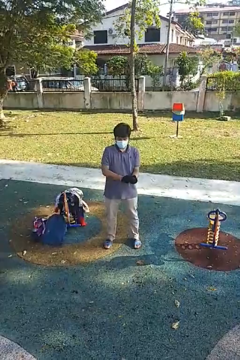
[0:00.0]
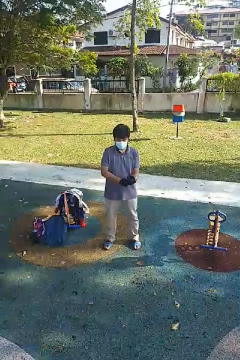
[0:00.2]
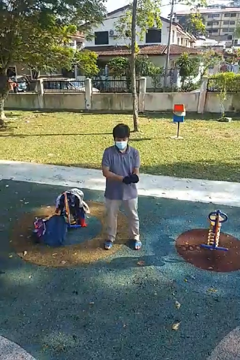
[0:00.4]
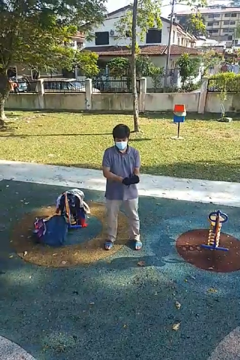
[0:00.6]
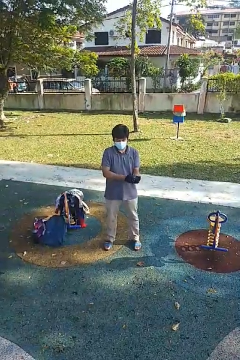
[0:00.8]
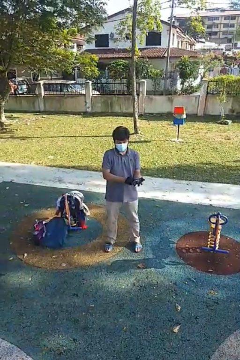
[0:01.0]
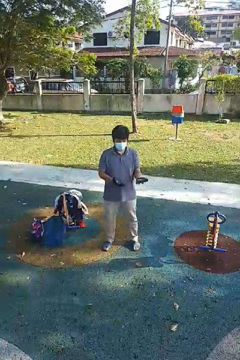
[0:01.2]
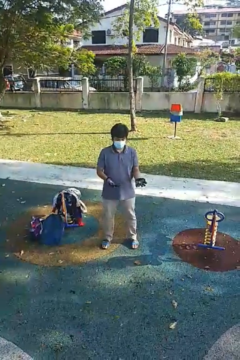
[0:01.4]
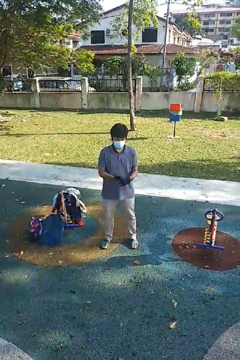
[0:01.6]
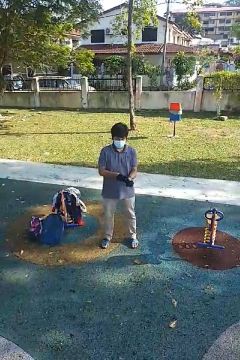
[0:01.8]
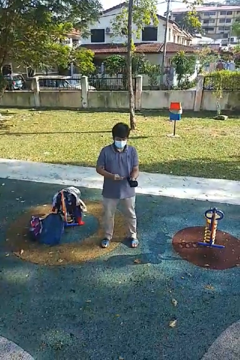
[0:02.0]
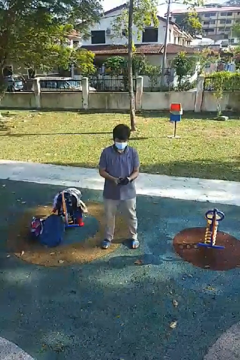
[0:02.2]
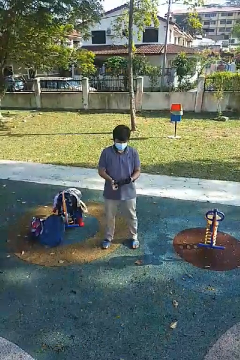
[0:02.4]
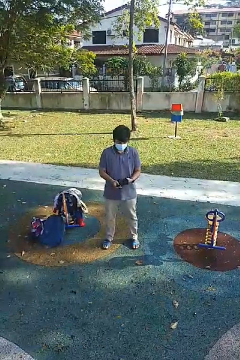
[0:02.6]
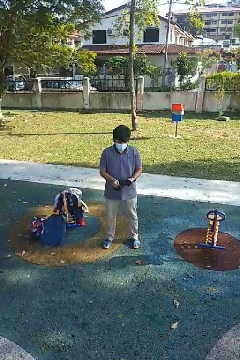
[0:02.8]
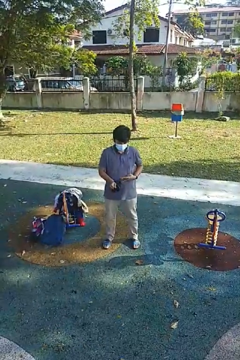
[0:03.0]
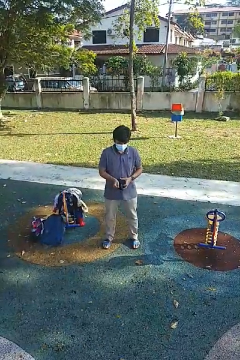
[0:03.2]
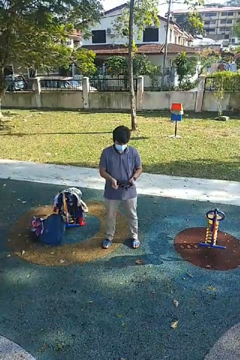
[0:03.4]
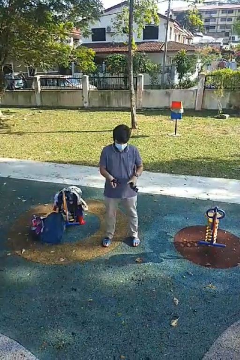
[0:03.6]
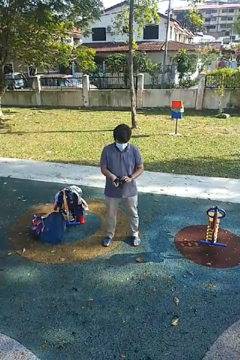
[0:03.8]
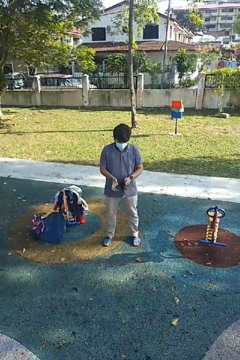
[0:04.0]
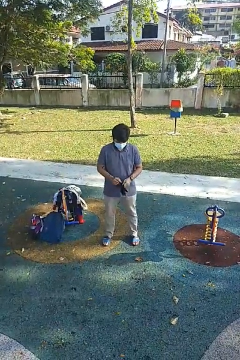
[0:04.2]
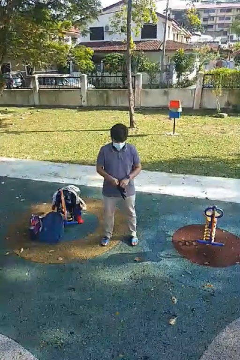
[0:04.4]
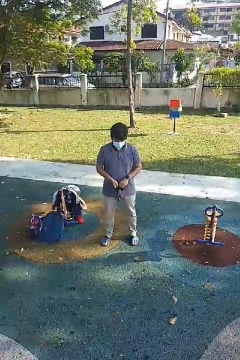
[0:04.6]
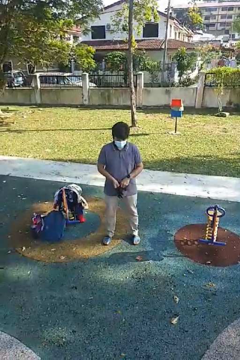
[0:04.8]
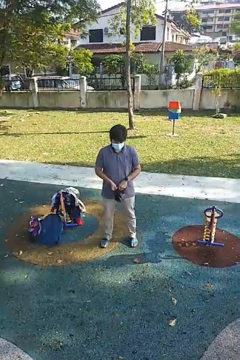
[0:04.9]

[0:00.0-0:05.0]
person takes off gloves

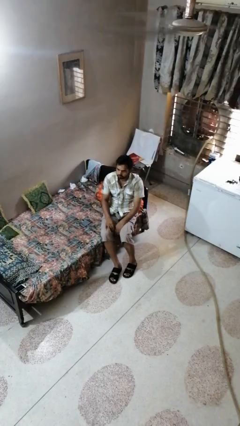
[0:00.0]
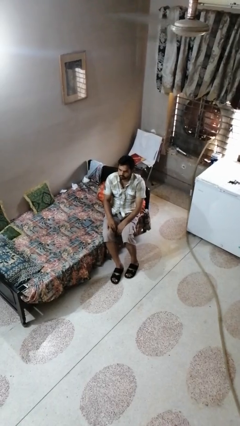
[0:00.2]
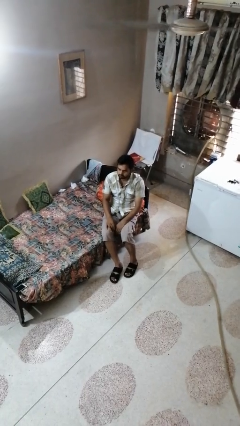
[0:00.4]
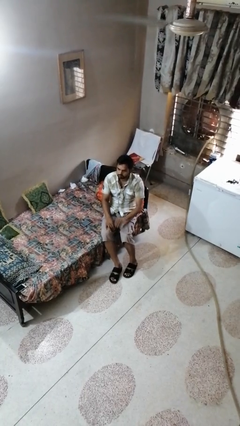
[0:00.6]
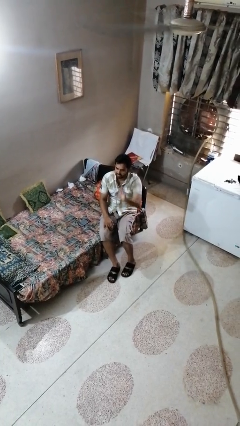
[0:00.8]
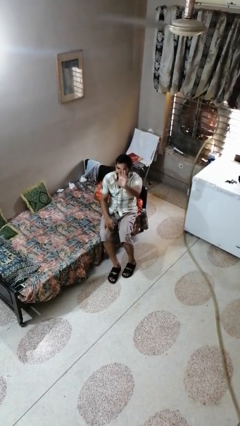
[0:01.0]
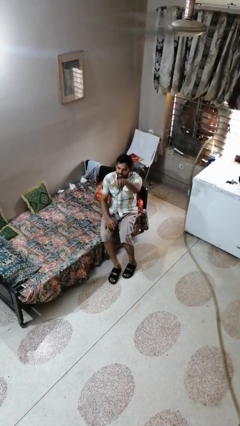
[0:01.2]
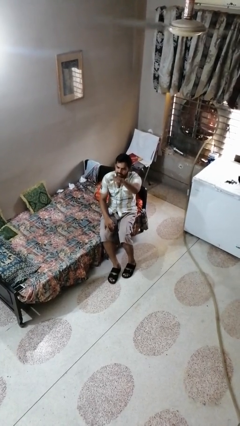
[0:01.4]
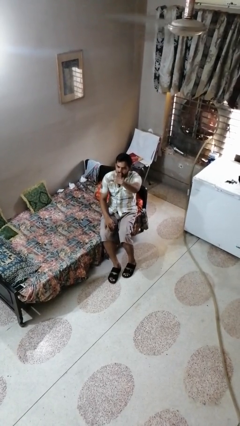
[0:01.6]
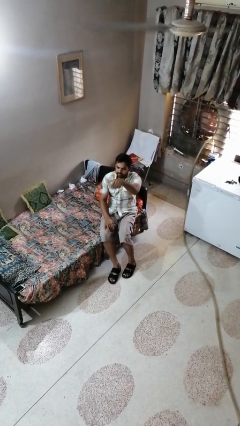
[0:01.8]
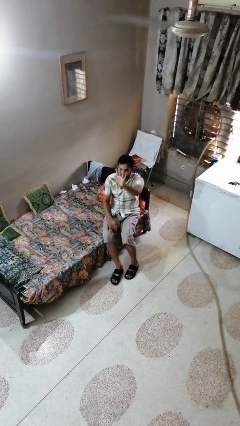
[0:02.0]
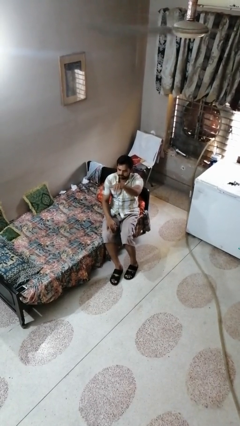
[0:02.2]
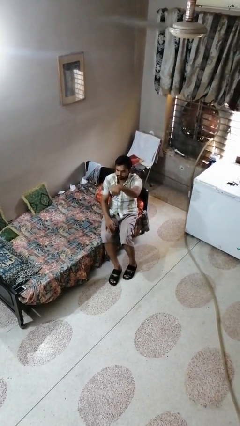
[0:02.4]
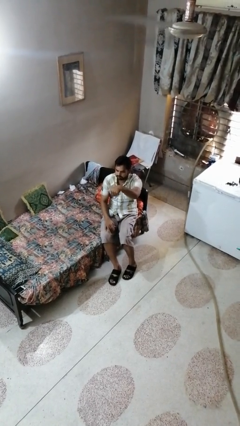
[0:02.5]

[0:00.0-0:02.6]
person gestures come here

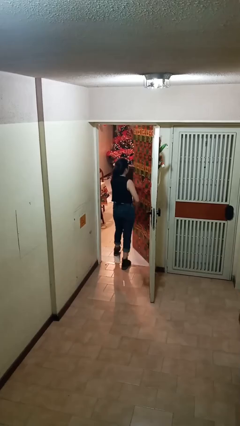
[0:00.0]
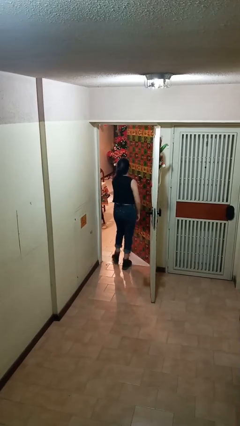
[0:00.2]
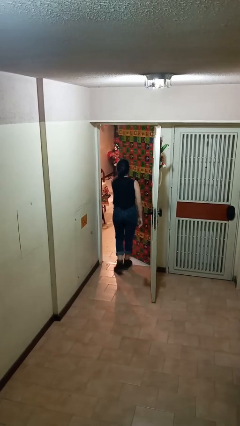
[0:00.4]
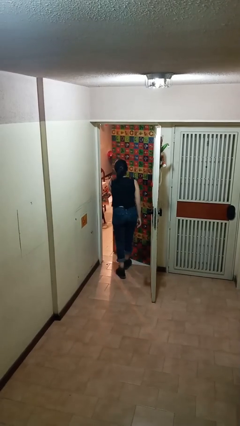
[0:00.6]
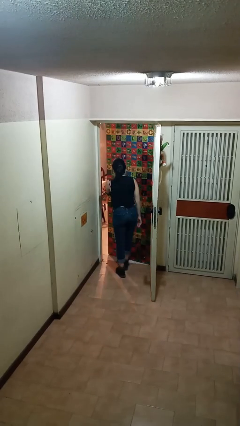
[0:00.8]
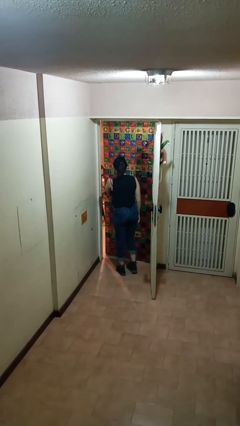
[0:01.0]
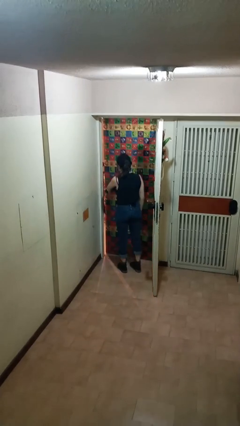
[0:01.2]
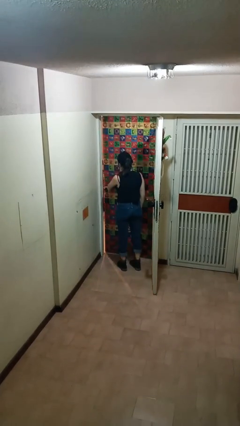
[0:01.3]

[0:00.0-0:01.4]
person closes facility door

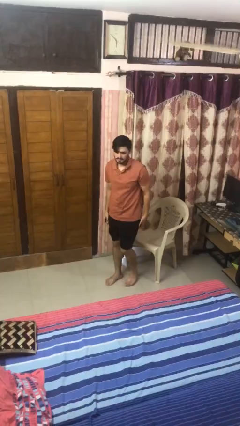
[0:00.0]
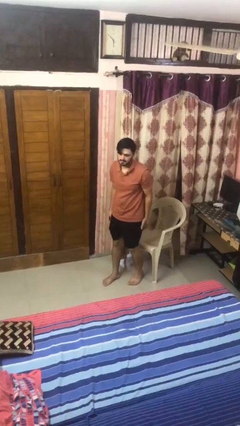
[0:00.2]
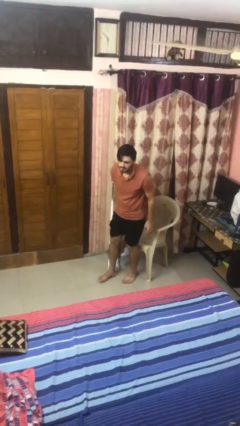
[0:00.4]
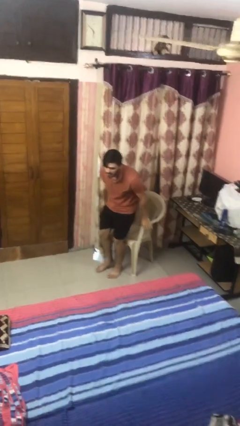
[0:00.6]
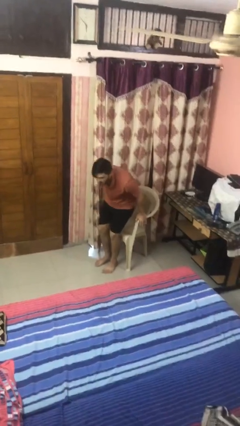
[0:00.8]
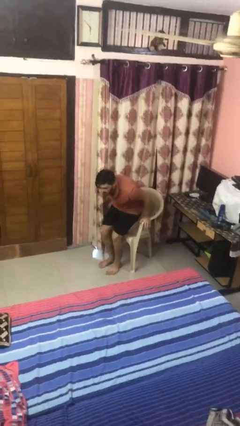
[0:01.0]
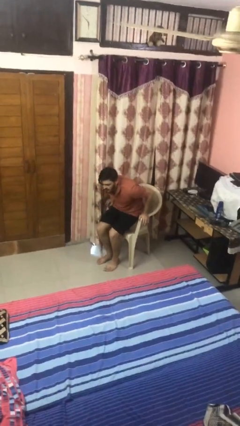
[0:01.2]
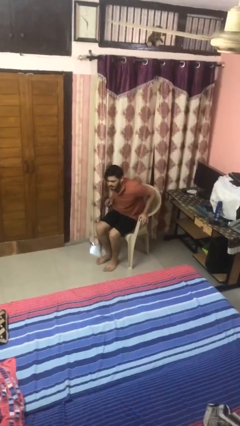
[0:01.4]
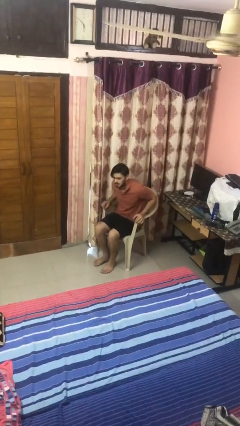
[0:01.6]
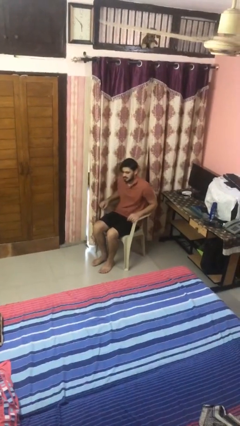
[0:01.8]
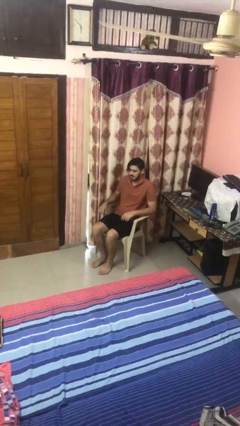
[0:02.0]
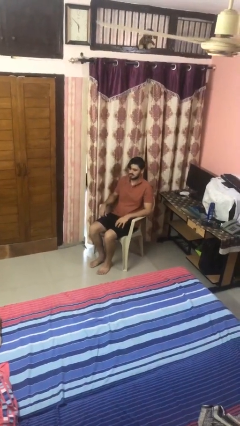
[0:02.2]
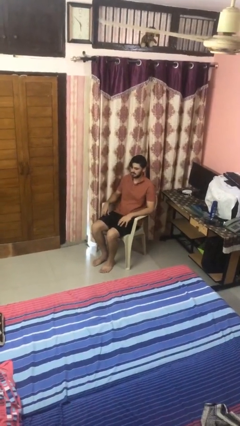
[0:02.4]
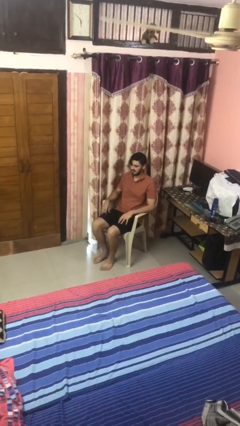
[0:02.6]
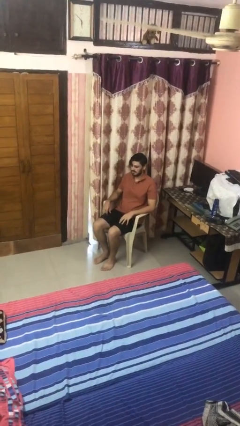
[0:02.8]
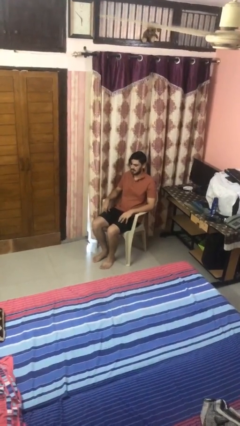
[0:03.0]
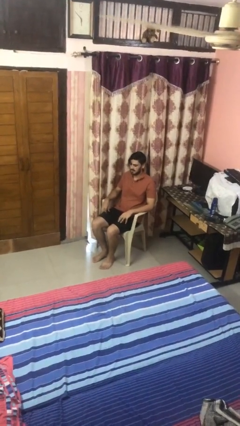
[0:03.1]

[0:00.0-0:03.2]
person sits down

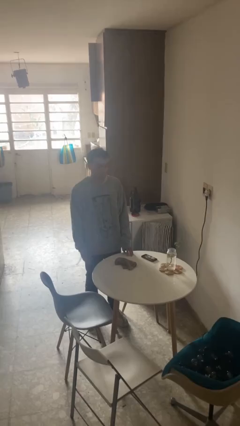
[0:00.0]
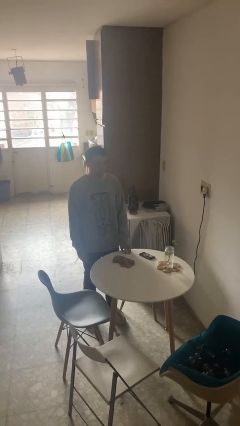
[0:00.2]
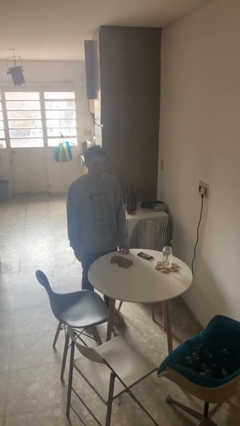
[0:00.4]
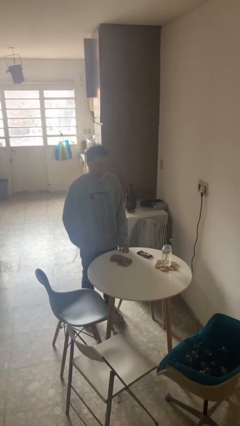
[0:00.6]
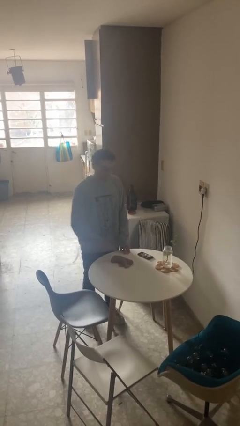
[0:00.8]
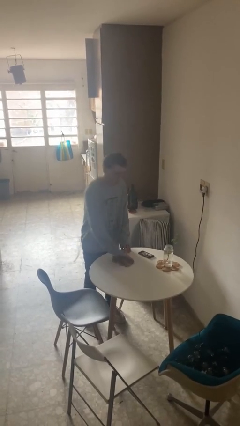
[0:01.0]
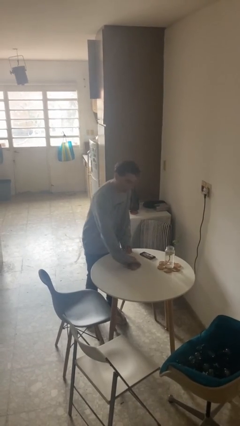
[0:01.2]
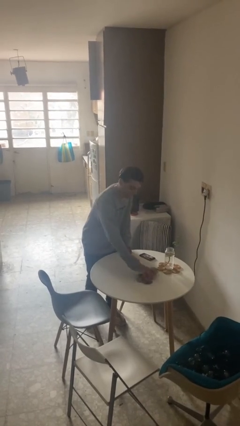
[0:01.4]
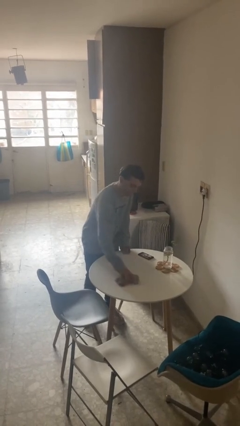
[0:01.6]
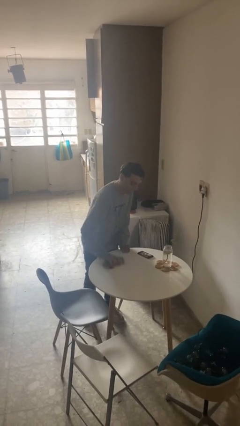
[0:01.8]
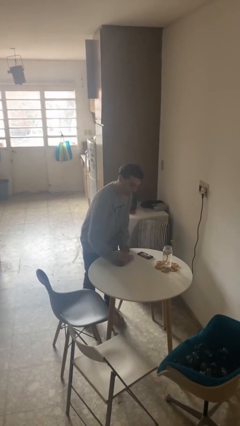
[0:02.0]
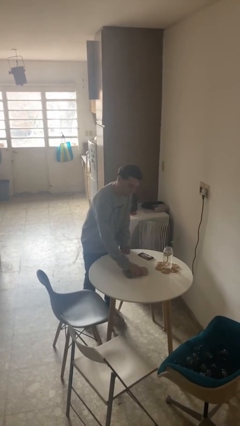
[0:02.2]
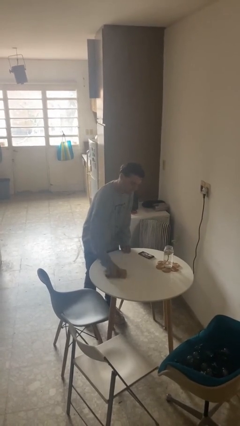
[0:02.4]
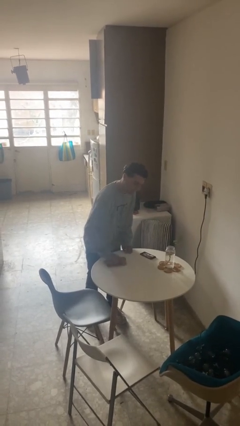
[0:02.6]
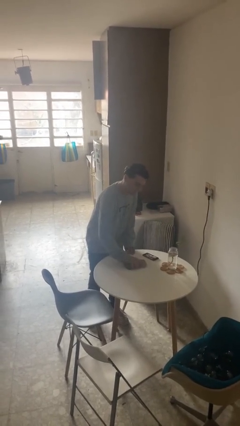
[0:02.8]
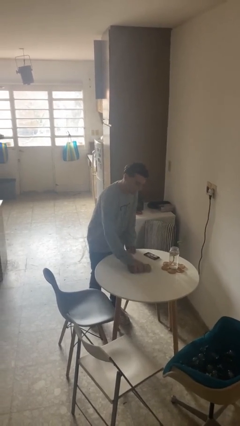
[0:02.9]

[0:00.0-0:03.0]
person cleans table with rag

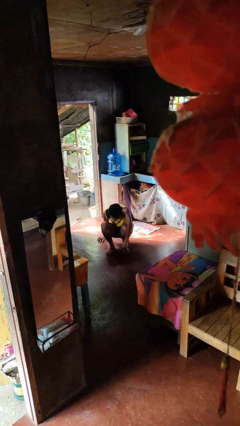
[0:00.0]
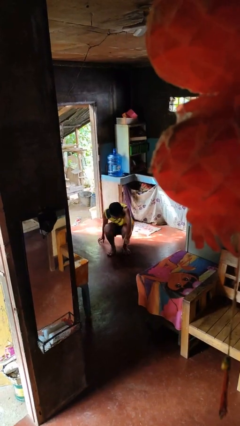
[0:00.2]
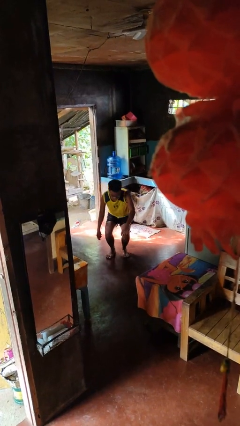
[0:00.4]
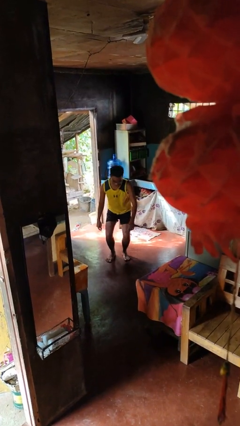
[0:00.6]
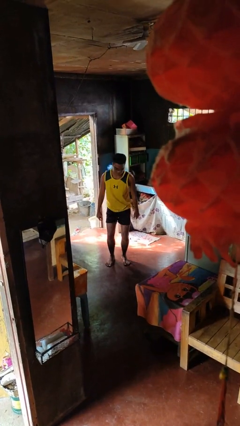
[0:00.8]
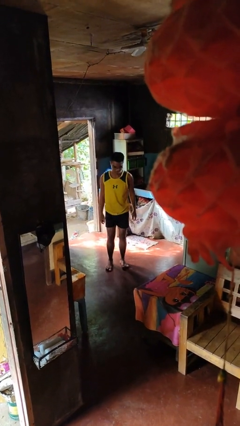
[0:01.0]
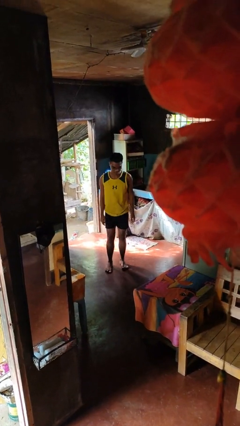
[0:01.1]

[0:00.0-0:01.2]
person stands up from floor

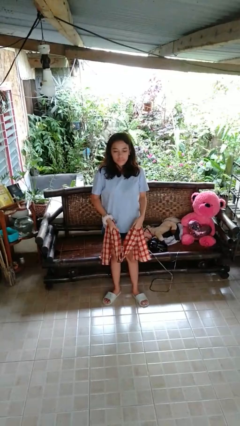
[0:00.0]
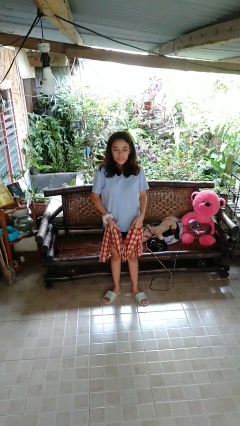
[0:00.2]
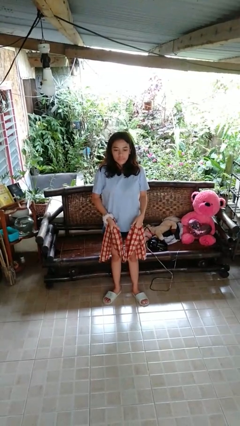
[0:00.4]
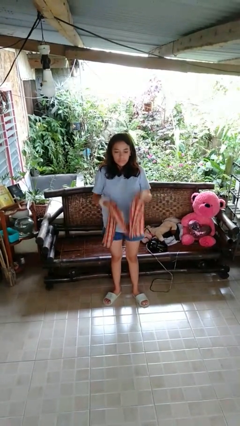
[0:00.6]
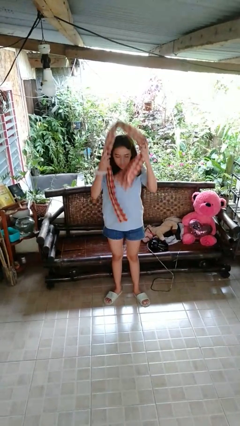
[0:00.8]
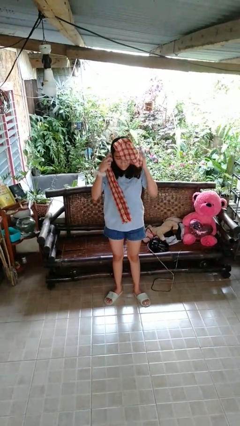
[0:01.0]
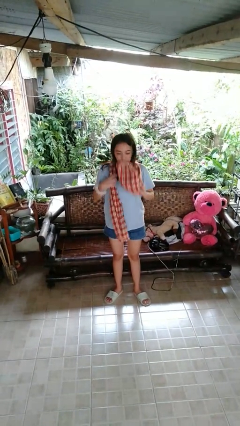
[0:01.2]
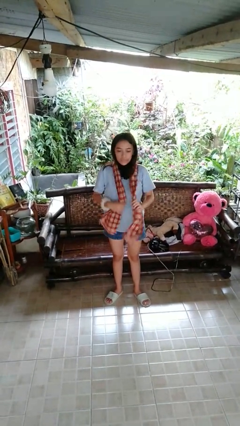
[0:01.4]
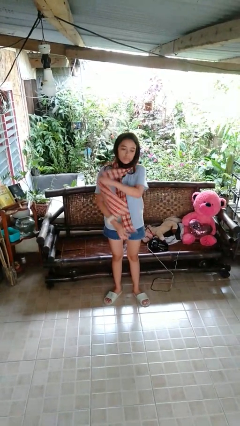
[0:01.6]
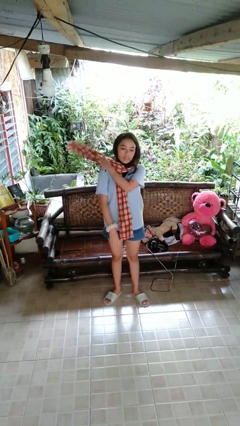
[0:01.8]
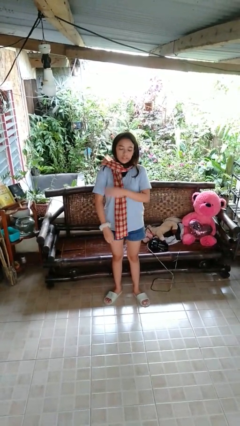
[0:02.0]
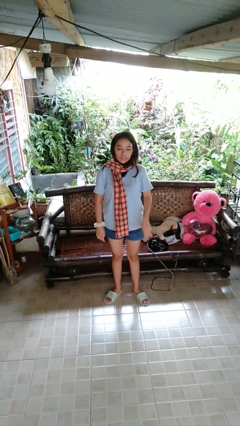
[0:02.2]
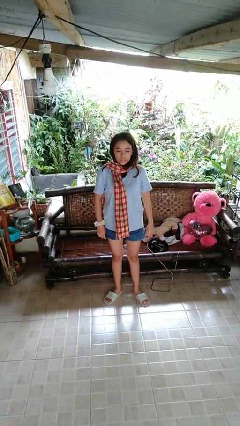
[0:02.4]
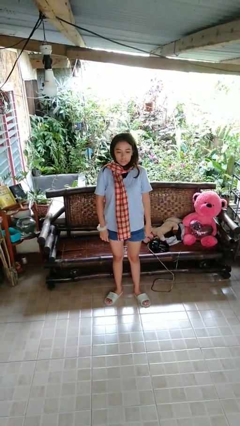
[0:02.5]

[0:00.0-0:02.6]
person puts on scarf
